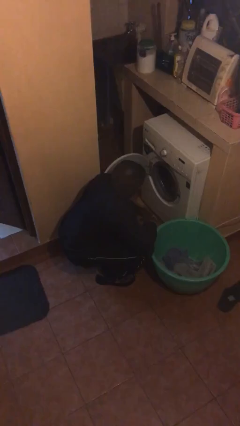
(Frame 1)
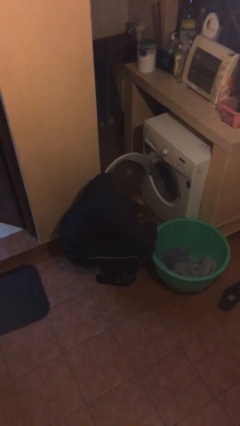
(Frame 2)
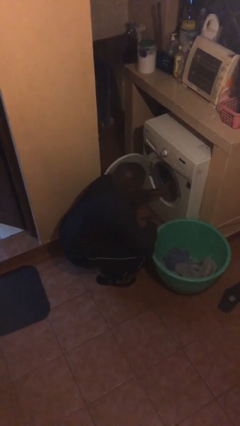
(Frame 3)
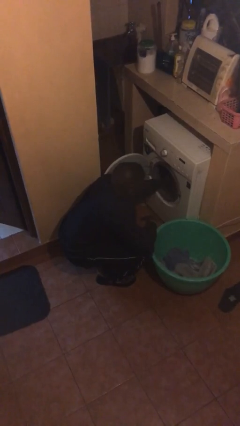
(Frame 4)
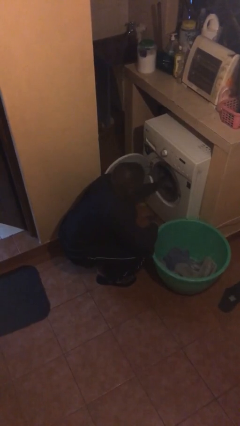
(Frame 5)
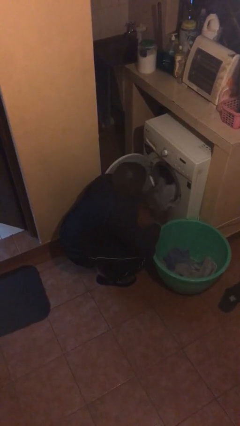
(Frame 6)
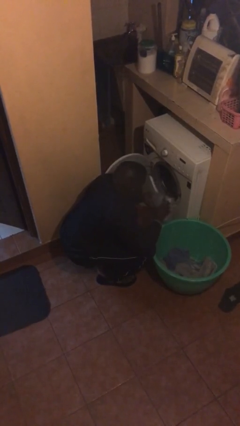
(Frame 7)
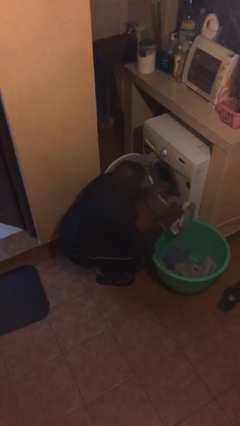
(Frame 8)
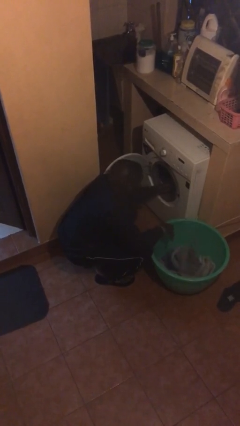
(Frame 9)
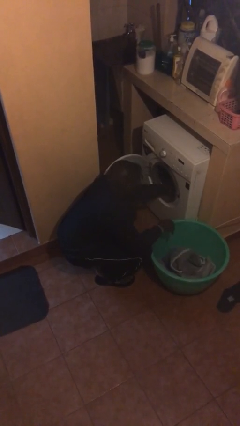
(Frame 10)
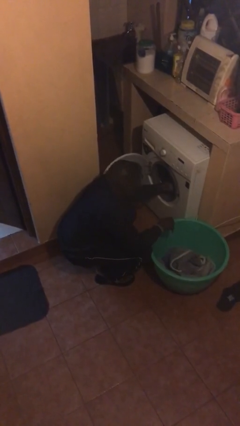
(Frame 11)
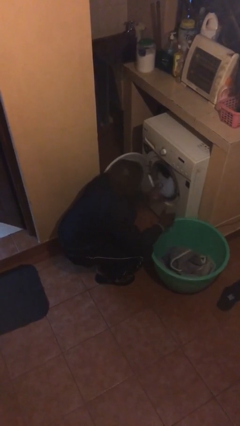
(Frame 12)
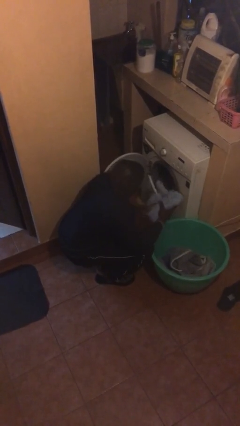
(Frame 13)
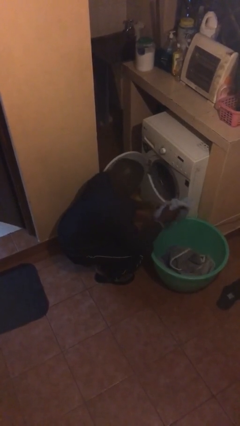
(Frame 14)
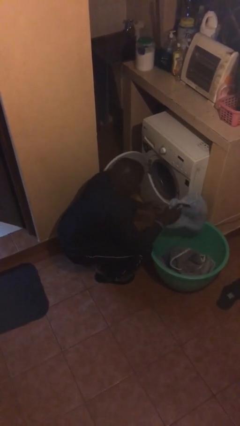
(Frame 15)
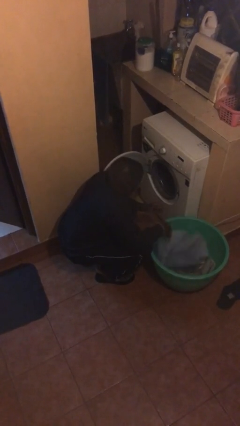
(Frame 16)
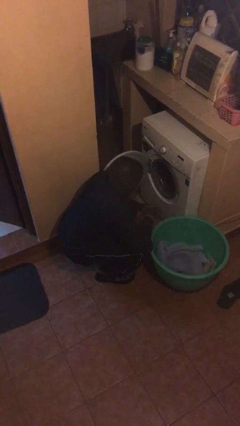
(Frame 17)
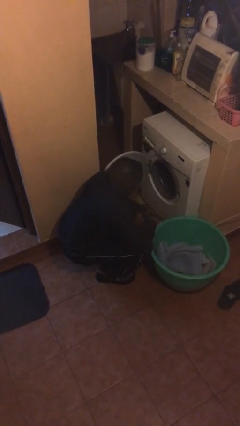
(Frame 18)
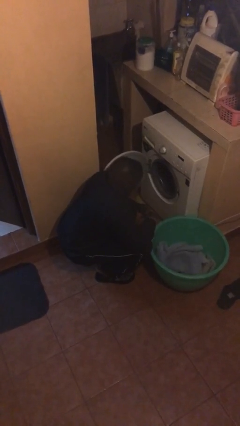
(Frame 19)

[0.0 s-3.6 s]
person loads clotheswasher

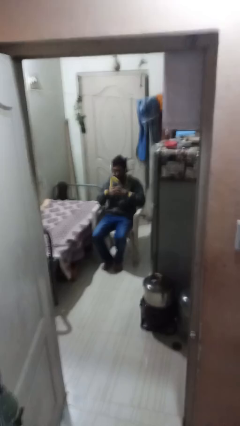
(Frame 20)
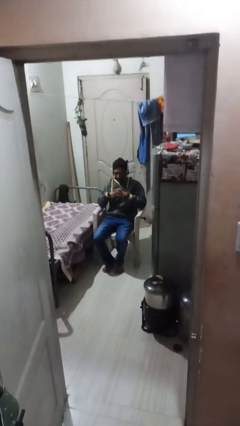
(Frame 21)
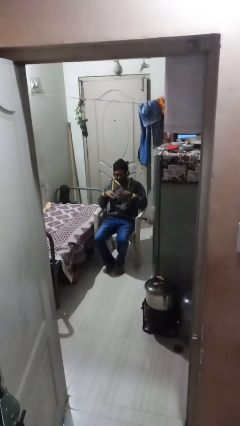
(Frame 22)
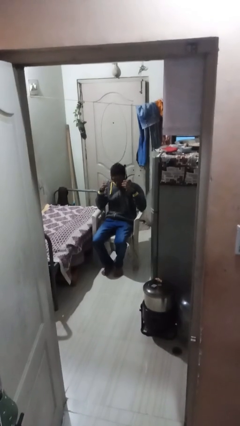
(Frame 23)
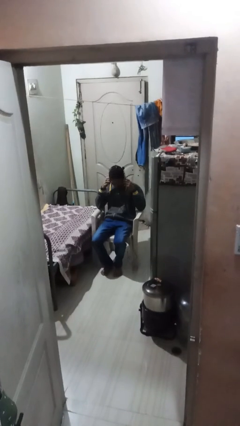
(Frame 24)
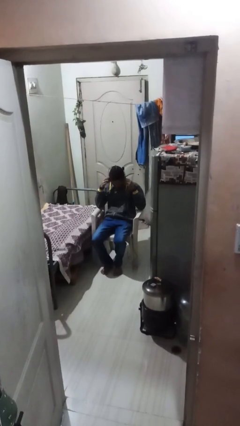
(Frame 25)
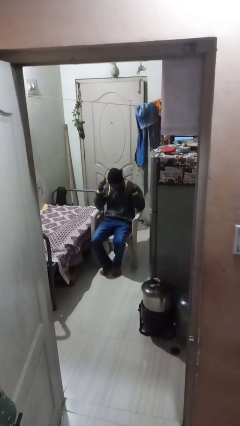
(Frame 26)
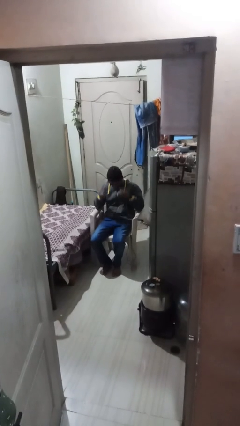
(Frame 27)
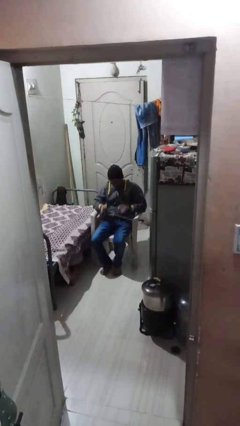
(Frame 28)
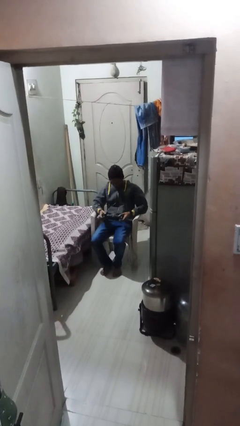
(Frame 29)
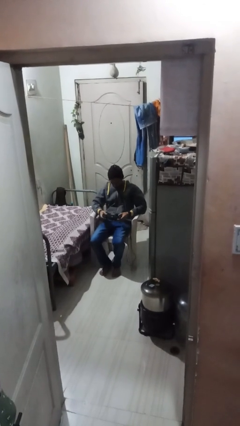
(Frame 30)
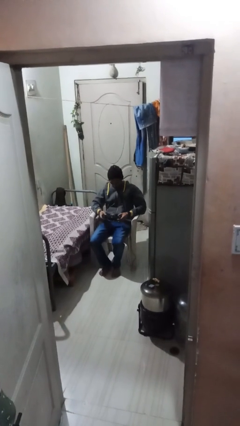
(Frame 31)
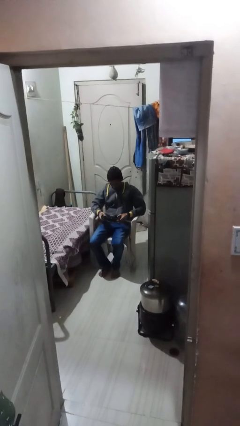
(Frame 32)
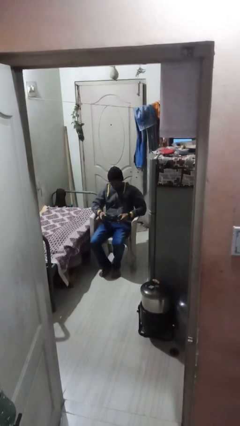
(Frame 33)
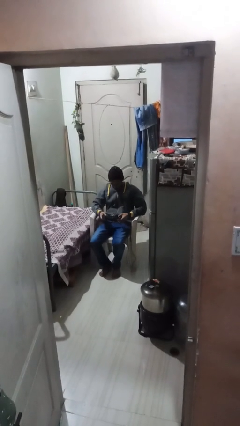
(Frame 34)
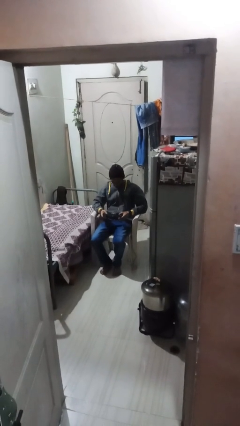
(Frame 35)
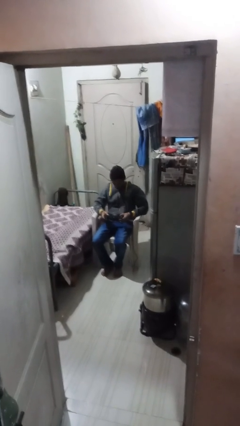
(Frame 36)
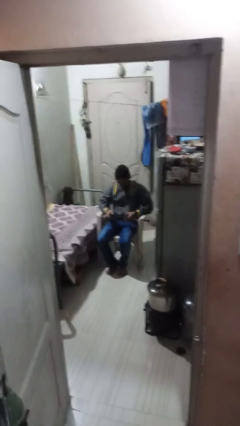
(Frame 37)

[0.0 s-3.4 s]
person takes off headphones

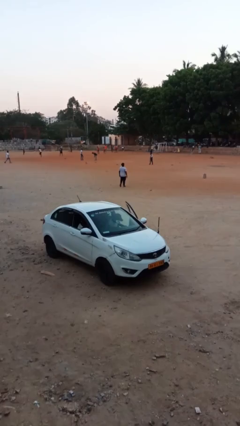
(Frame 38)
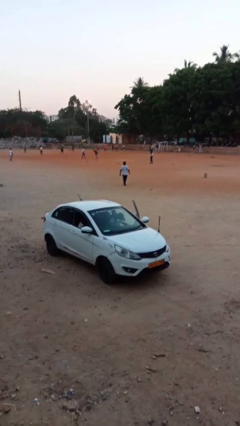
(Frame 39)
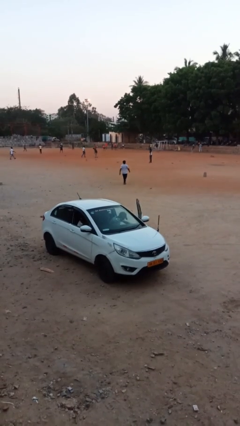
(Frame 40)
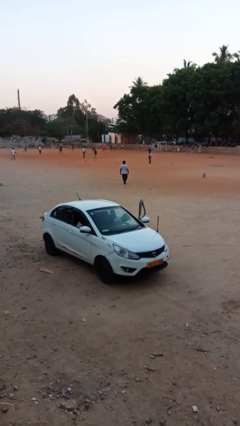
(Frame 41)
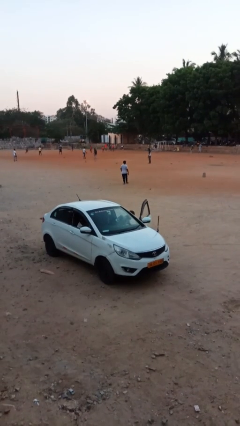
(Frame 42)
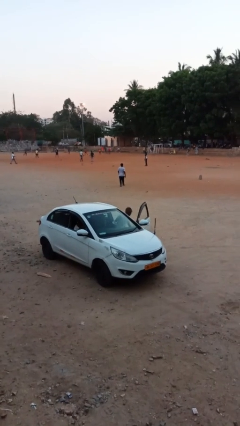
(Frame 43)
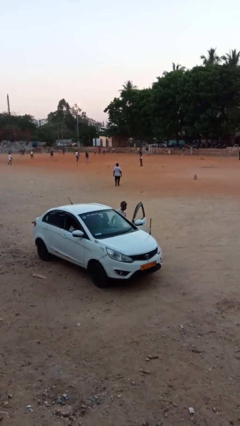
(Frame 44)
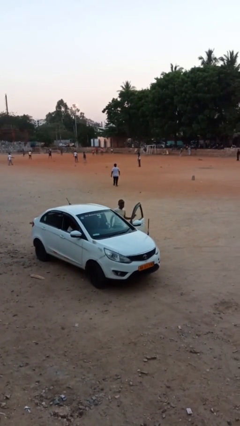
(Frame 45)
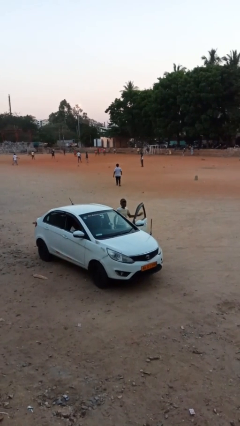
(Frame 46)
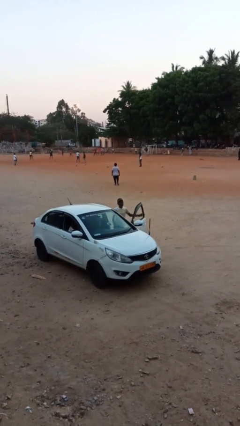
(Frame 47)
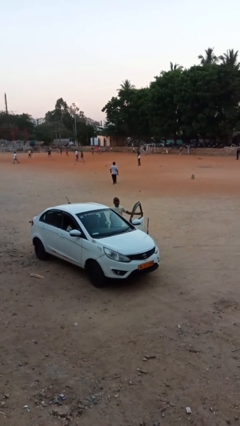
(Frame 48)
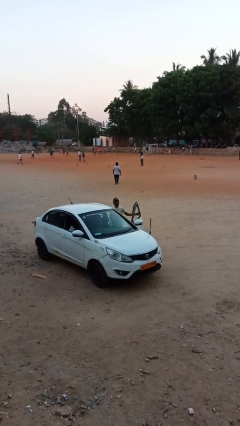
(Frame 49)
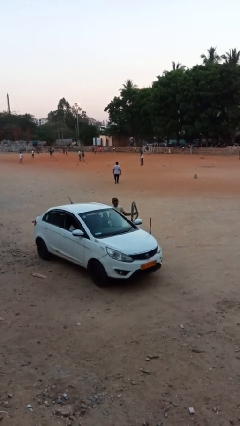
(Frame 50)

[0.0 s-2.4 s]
person exits car

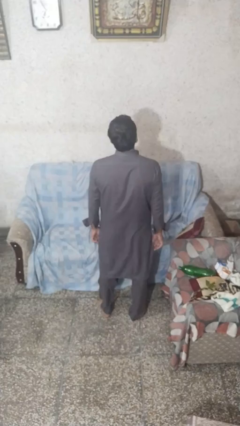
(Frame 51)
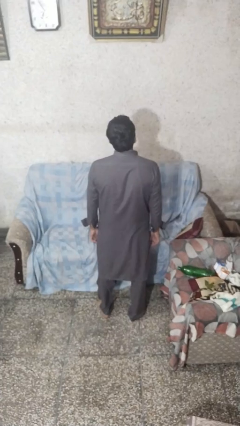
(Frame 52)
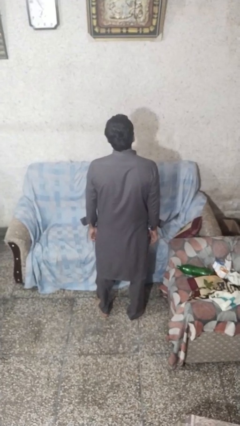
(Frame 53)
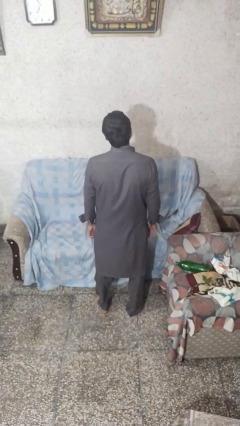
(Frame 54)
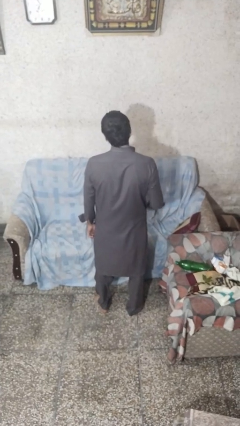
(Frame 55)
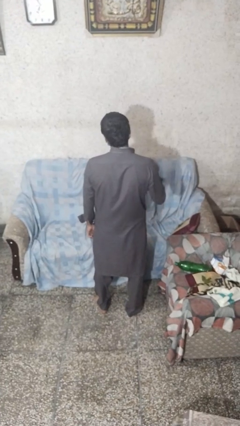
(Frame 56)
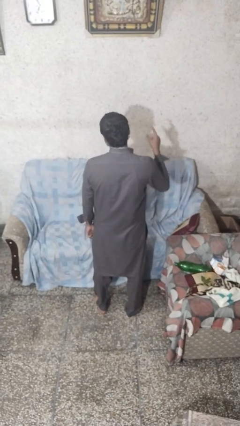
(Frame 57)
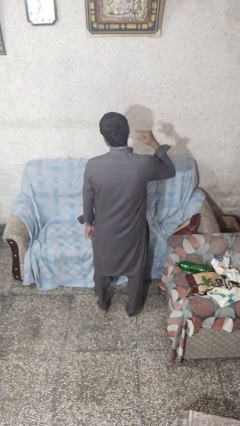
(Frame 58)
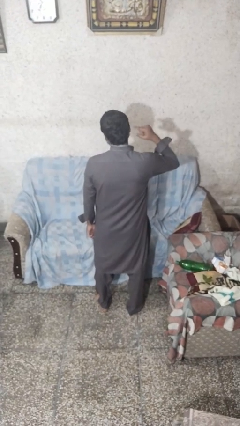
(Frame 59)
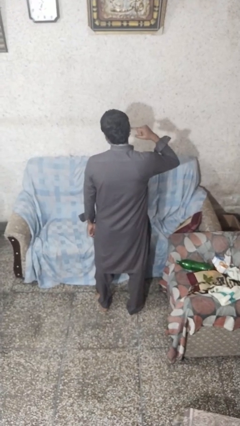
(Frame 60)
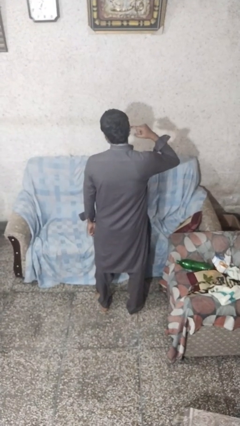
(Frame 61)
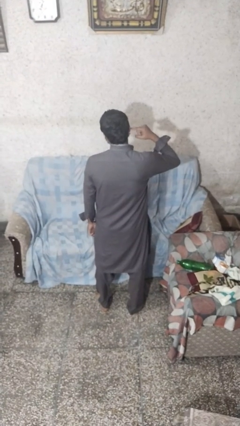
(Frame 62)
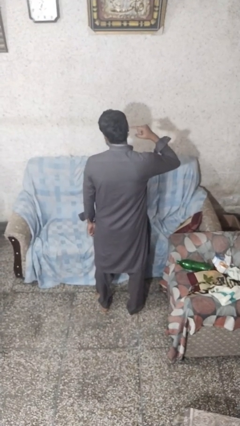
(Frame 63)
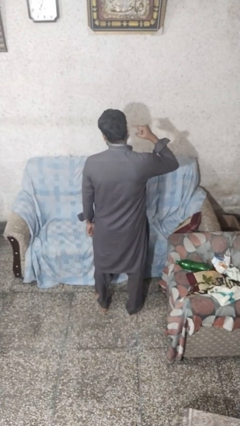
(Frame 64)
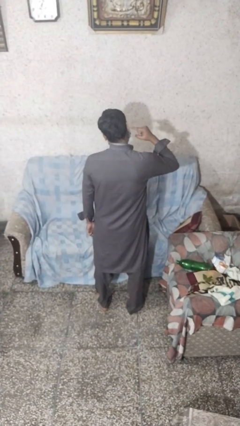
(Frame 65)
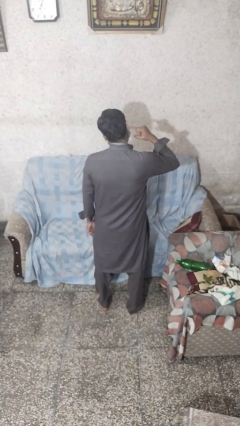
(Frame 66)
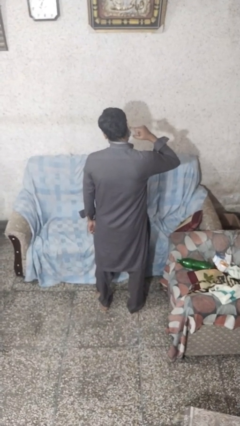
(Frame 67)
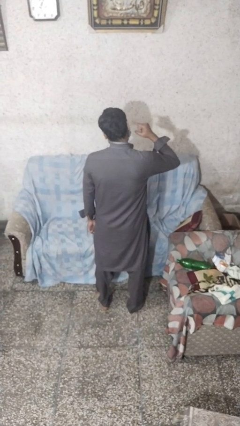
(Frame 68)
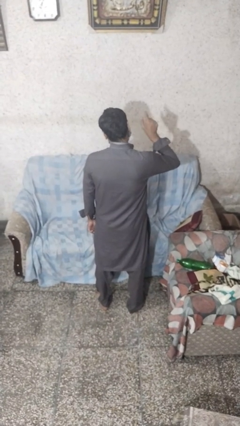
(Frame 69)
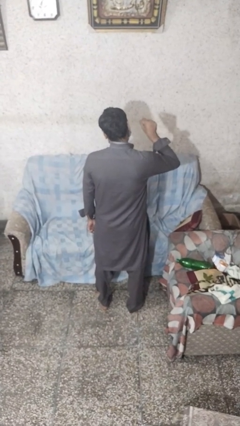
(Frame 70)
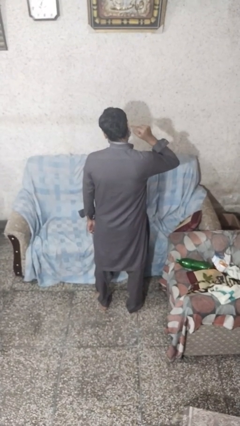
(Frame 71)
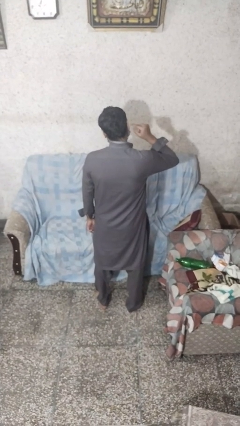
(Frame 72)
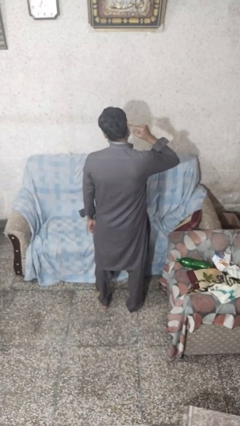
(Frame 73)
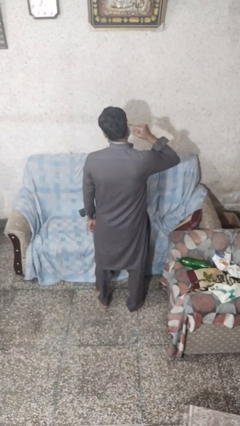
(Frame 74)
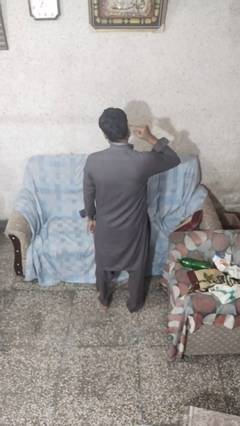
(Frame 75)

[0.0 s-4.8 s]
person gestures listen closely

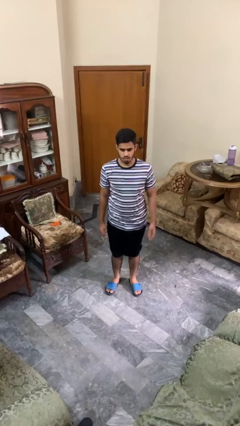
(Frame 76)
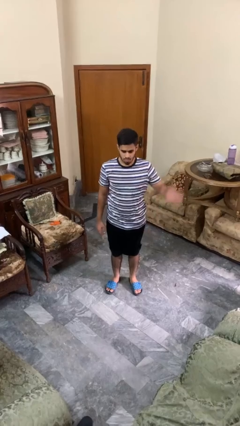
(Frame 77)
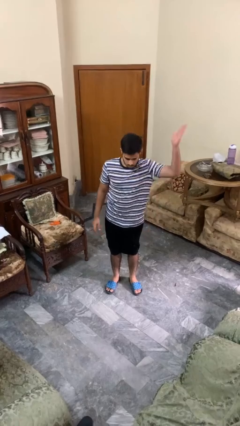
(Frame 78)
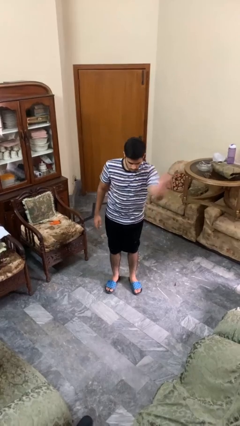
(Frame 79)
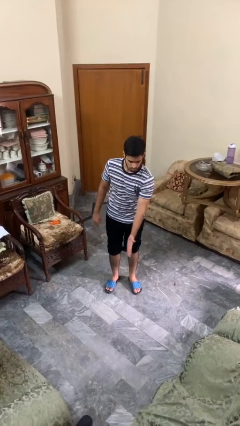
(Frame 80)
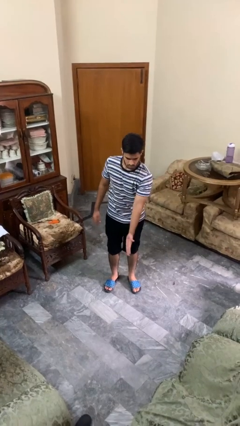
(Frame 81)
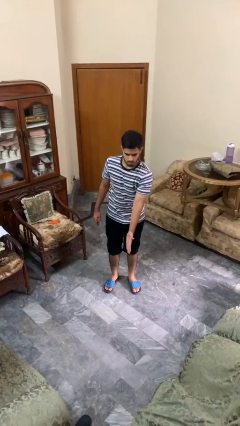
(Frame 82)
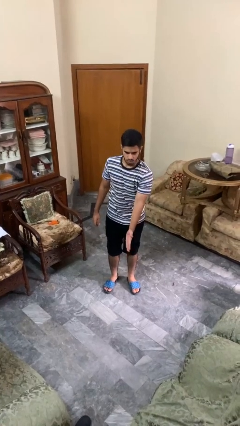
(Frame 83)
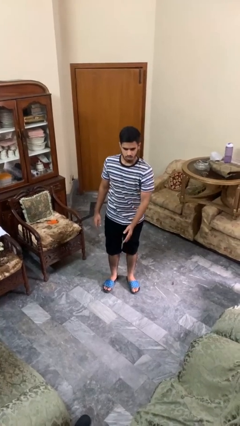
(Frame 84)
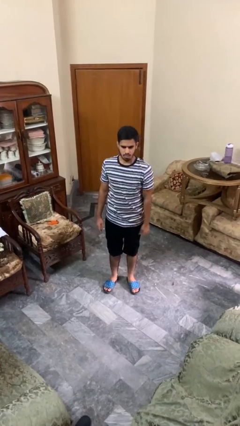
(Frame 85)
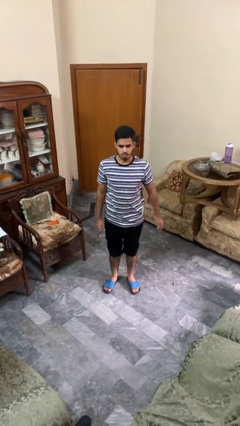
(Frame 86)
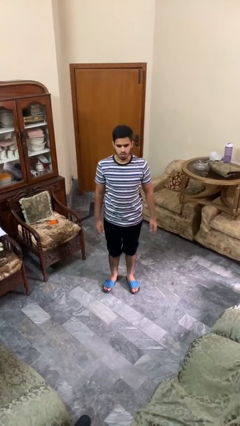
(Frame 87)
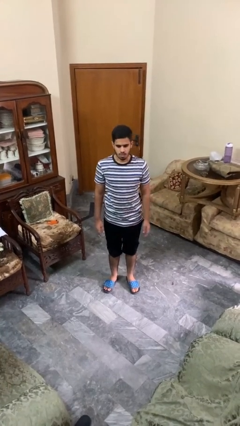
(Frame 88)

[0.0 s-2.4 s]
person karate chop

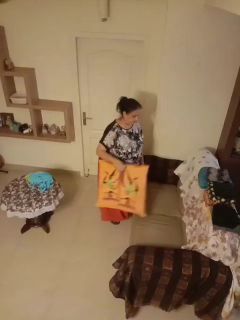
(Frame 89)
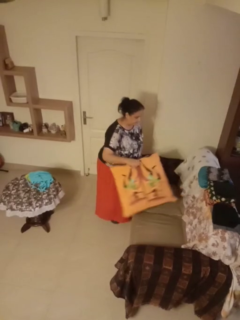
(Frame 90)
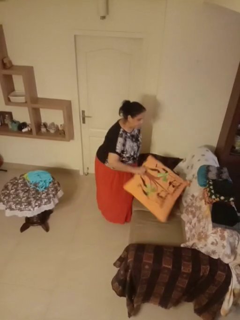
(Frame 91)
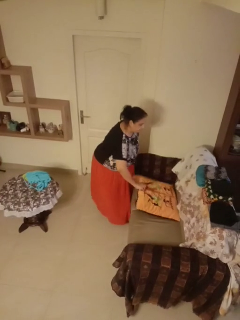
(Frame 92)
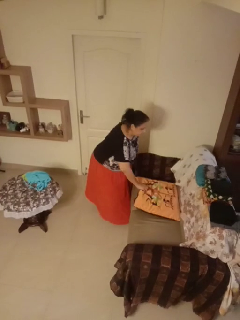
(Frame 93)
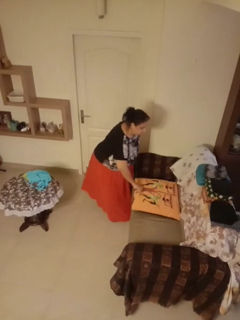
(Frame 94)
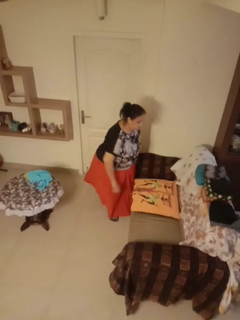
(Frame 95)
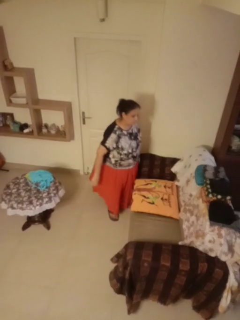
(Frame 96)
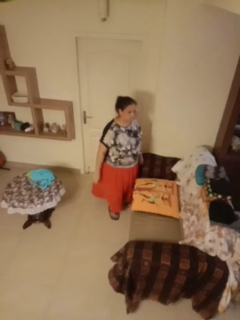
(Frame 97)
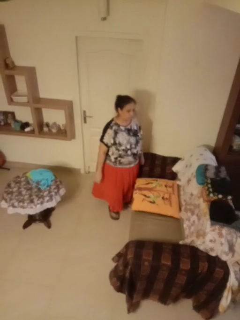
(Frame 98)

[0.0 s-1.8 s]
person puts down object on couch
